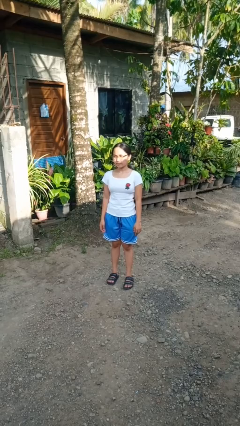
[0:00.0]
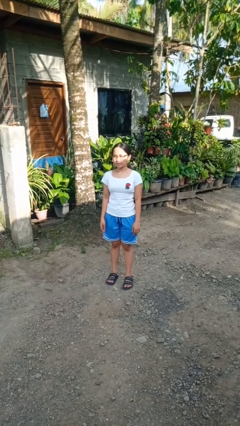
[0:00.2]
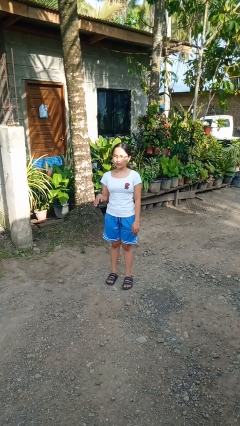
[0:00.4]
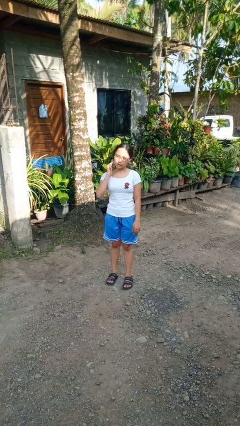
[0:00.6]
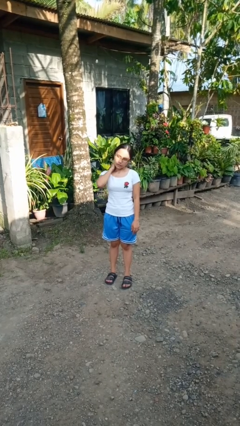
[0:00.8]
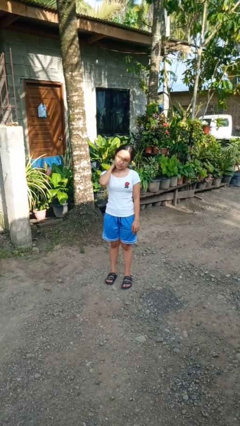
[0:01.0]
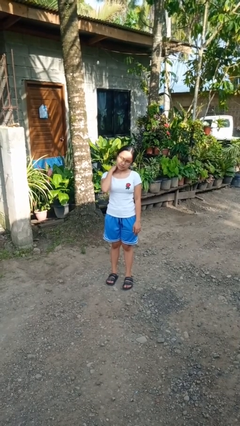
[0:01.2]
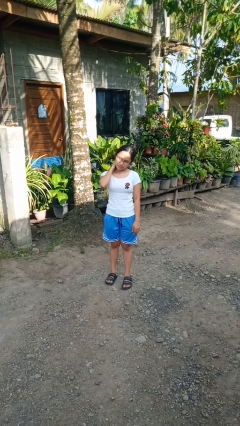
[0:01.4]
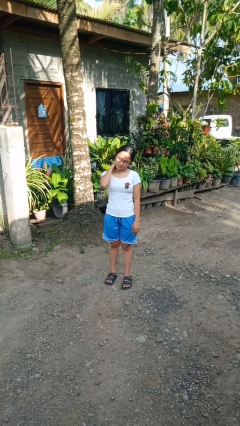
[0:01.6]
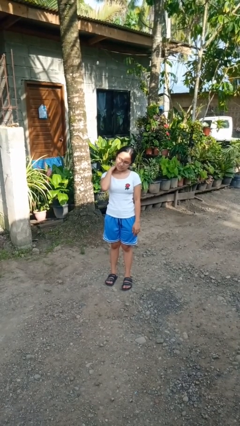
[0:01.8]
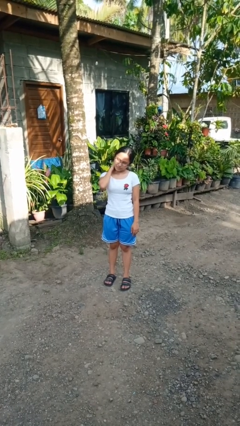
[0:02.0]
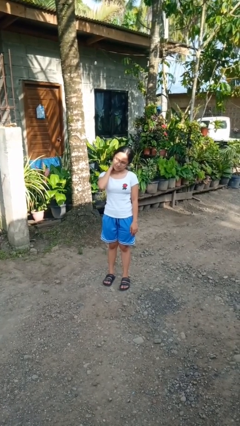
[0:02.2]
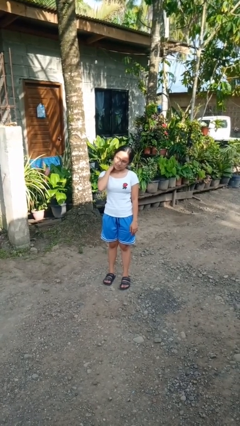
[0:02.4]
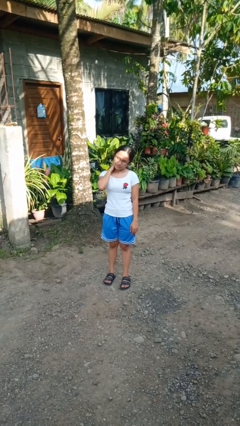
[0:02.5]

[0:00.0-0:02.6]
person rubs neck

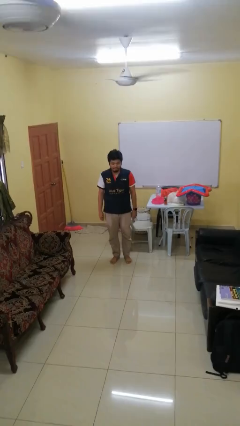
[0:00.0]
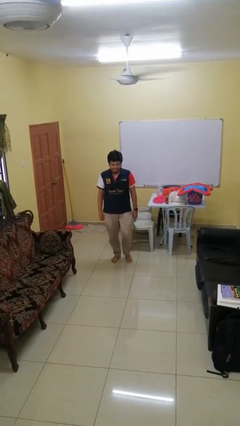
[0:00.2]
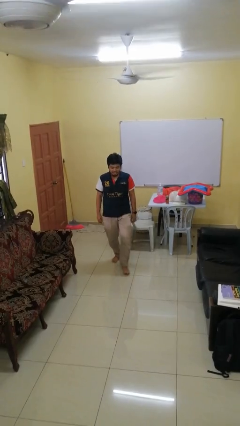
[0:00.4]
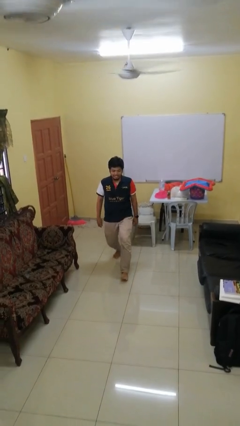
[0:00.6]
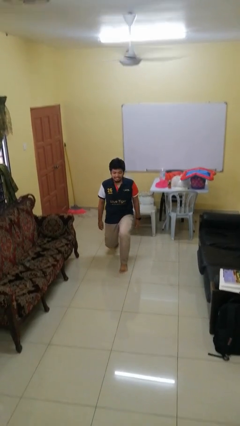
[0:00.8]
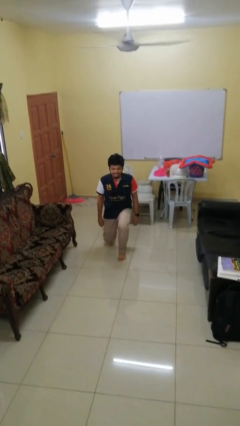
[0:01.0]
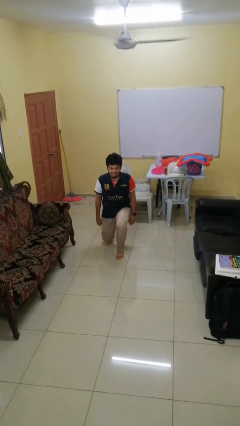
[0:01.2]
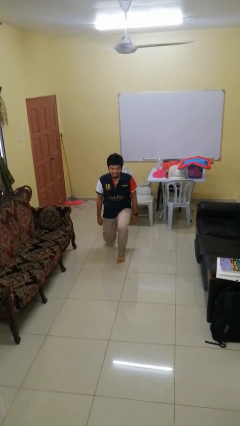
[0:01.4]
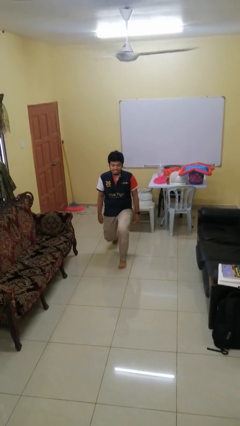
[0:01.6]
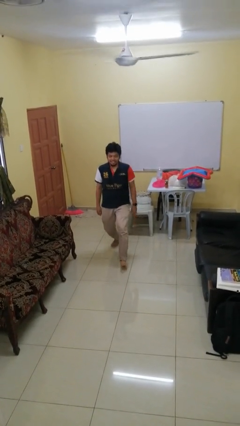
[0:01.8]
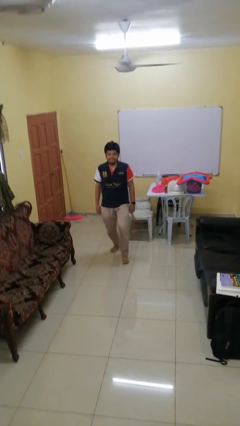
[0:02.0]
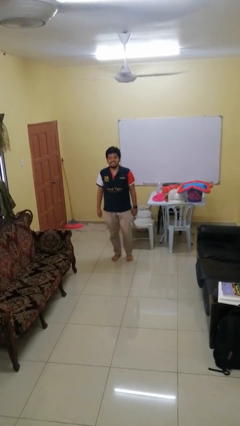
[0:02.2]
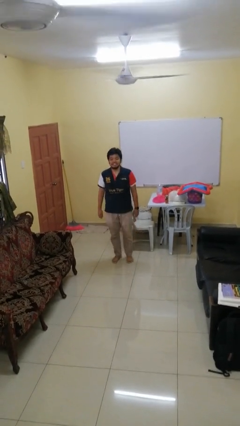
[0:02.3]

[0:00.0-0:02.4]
person exercises with lunges

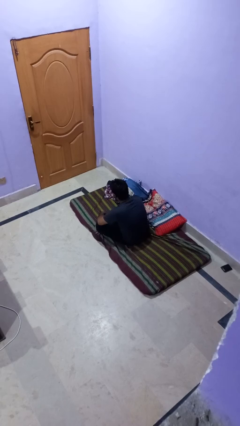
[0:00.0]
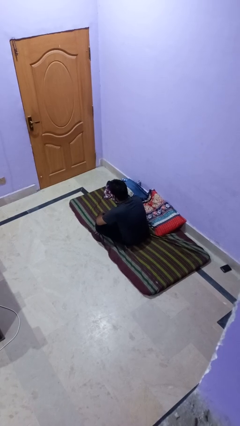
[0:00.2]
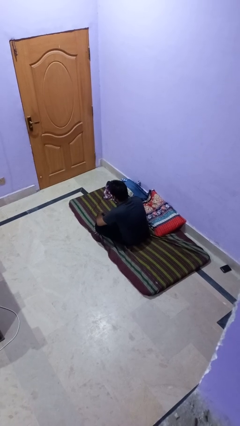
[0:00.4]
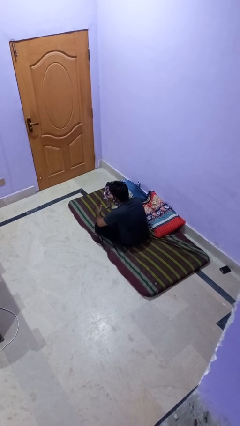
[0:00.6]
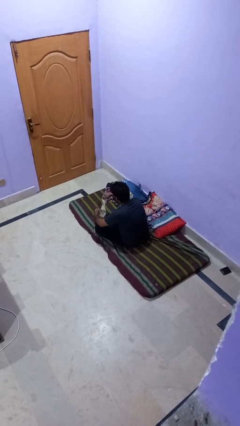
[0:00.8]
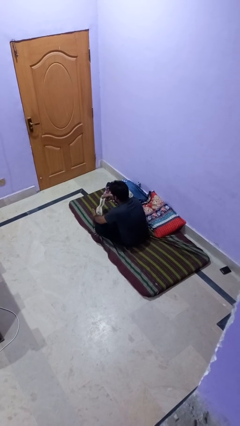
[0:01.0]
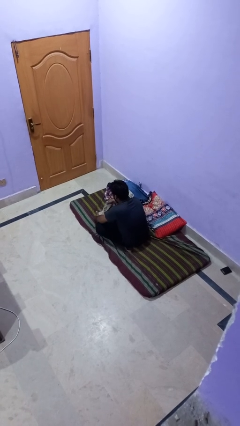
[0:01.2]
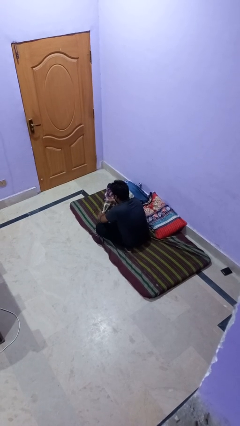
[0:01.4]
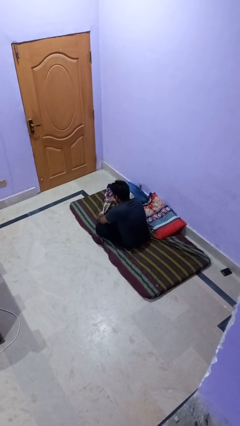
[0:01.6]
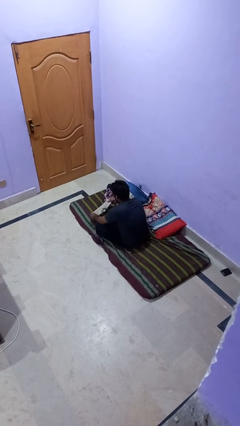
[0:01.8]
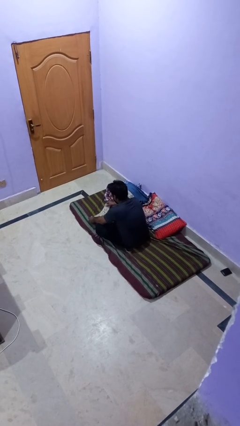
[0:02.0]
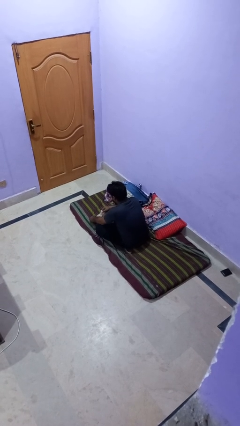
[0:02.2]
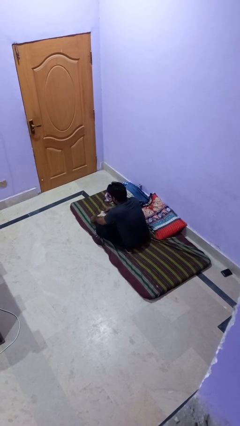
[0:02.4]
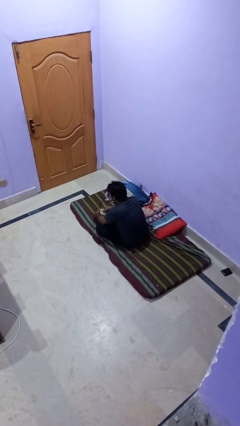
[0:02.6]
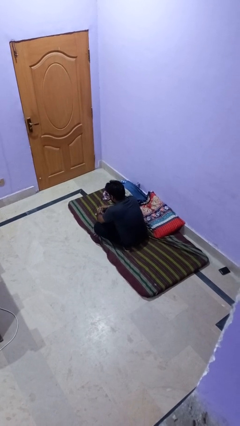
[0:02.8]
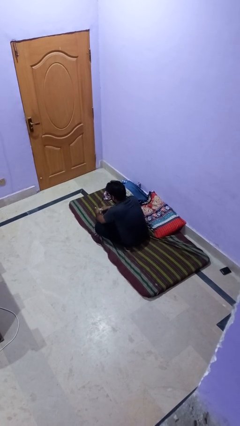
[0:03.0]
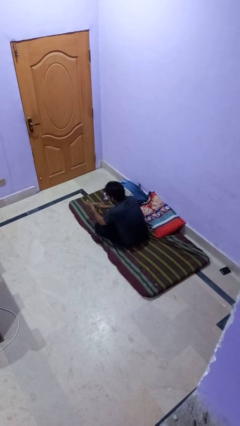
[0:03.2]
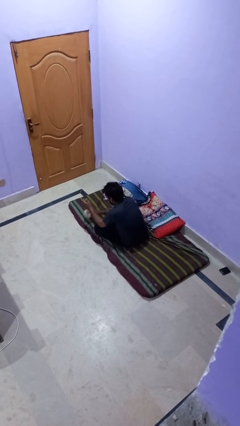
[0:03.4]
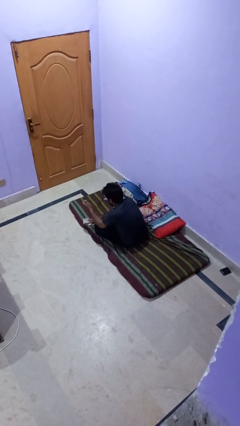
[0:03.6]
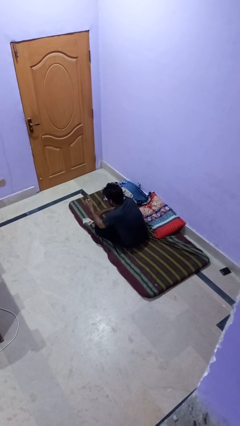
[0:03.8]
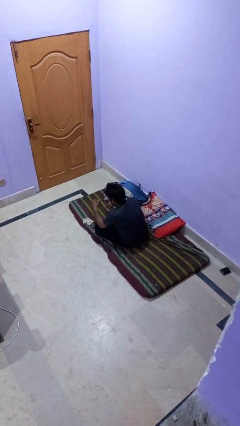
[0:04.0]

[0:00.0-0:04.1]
person folds socks

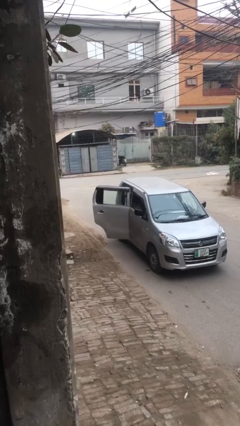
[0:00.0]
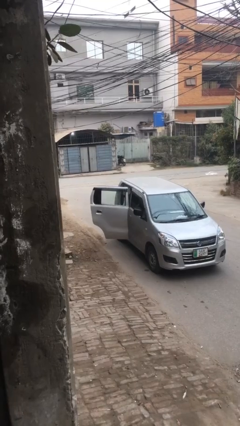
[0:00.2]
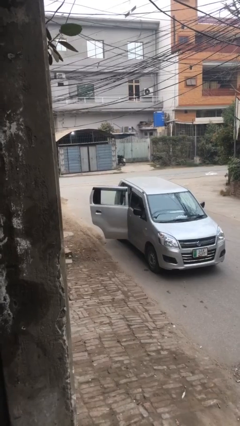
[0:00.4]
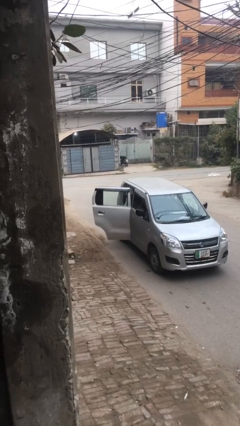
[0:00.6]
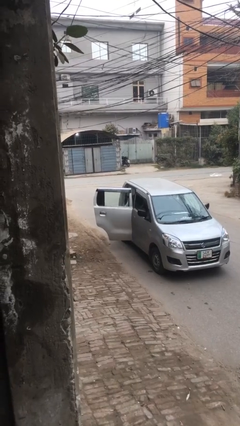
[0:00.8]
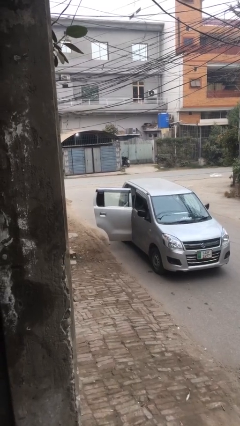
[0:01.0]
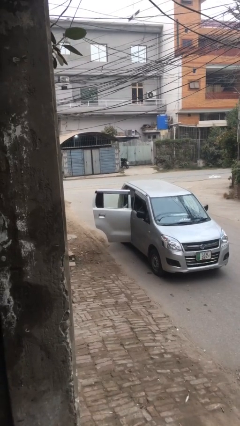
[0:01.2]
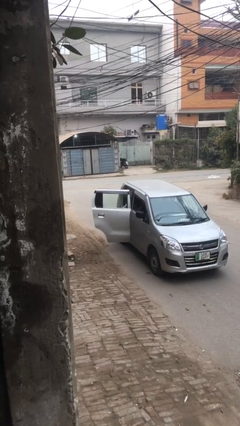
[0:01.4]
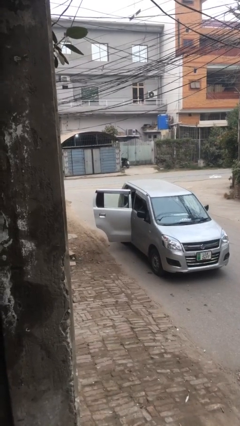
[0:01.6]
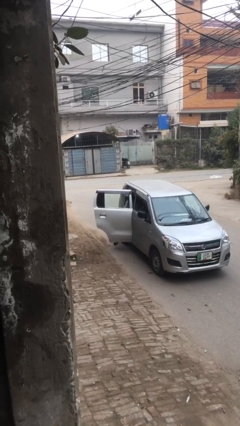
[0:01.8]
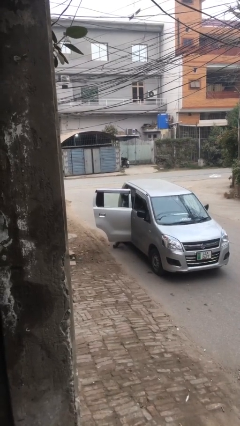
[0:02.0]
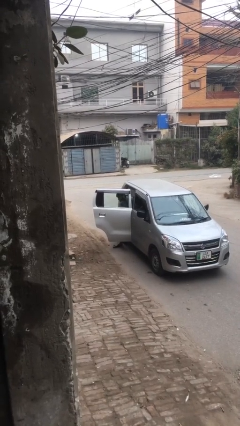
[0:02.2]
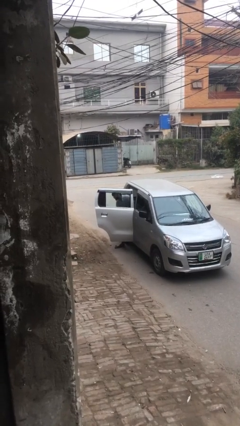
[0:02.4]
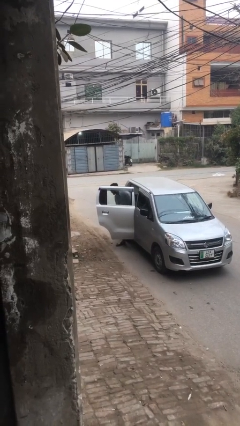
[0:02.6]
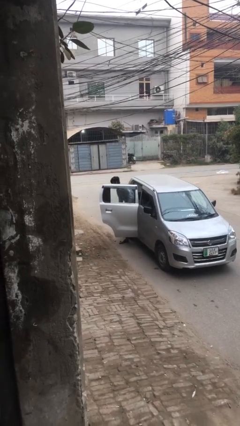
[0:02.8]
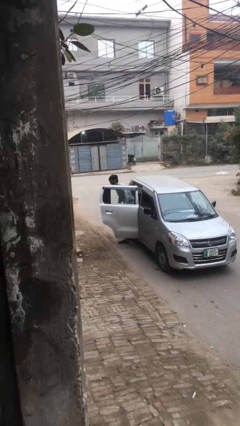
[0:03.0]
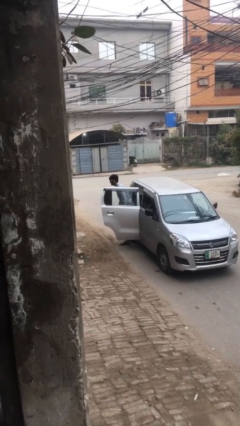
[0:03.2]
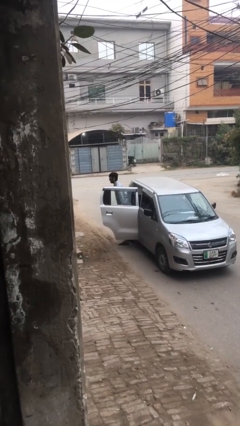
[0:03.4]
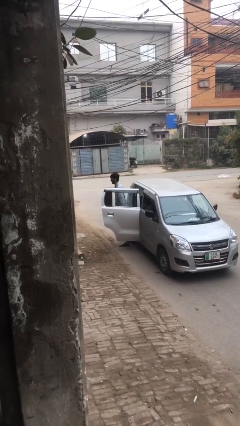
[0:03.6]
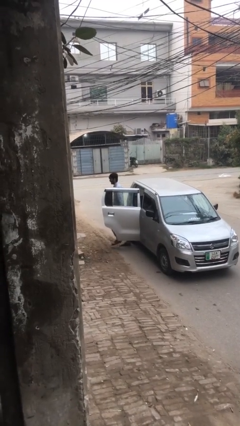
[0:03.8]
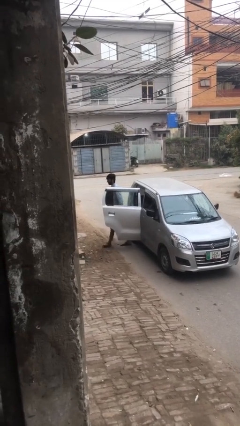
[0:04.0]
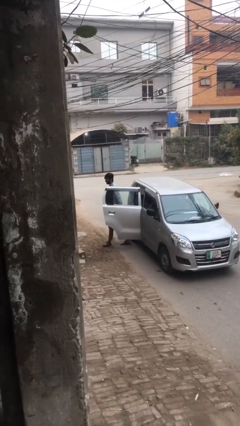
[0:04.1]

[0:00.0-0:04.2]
person exits car

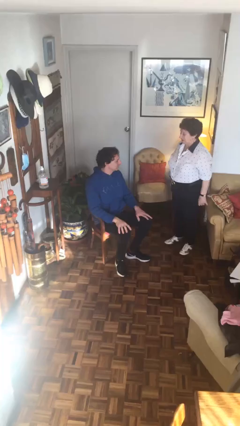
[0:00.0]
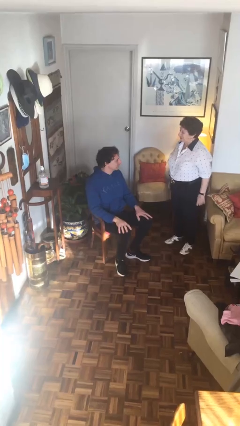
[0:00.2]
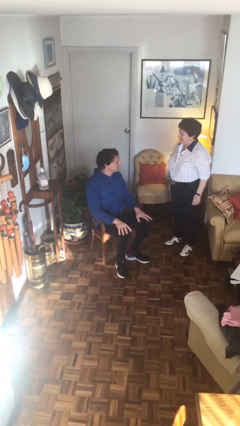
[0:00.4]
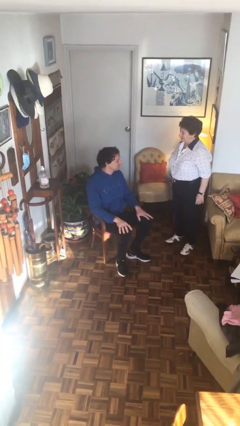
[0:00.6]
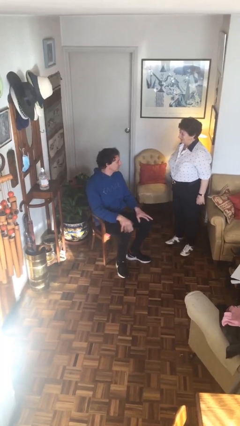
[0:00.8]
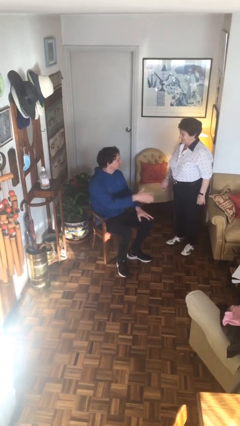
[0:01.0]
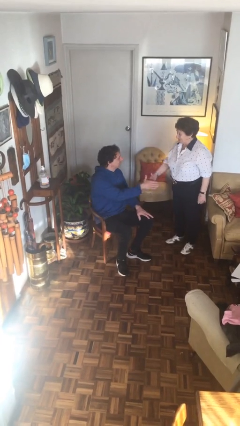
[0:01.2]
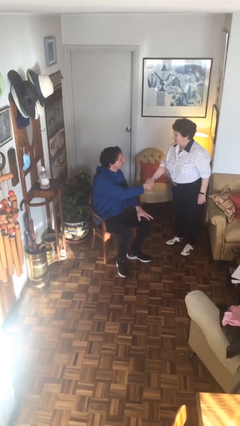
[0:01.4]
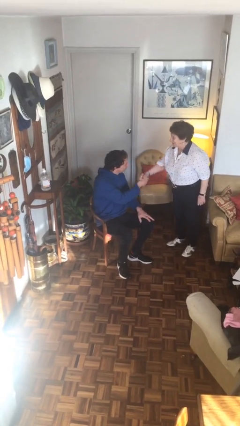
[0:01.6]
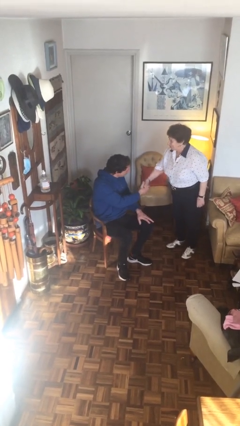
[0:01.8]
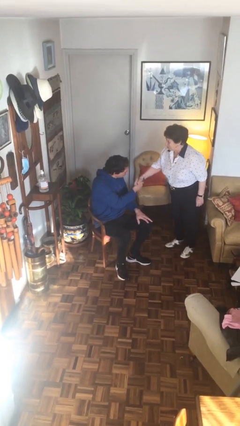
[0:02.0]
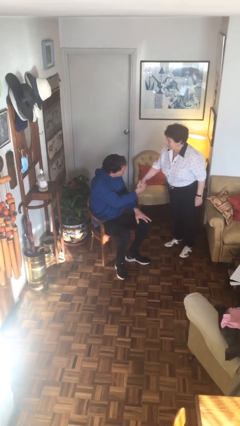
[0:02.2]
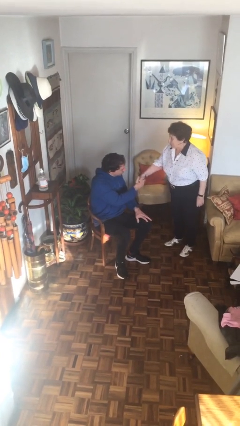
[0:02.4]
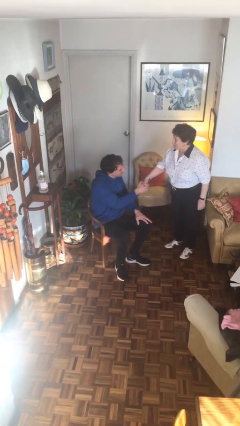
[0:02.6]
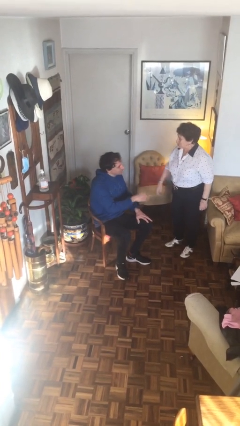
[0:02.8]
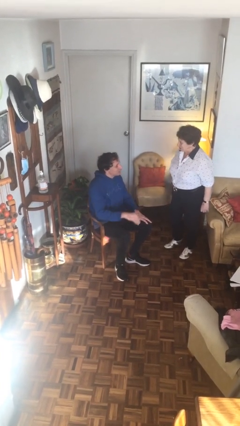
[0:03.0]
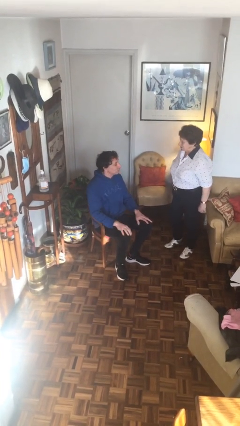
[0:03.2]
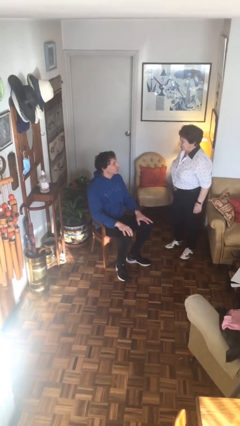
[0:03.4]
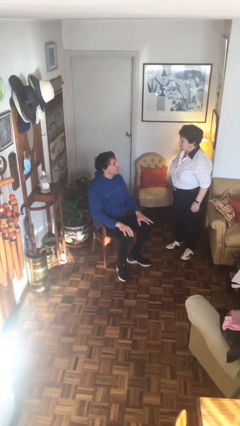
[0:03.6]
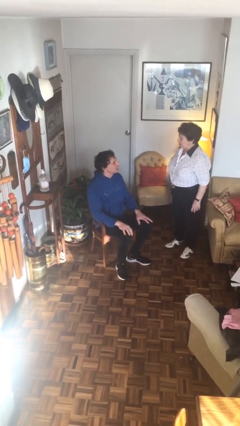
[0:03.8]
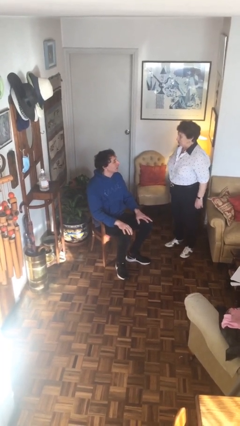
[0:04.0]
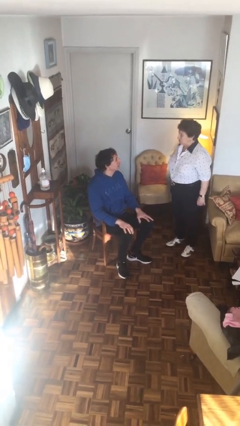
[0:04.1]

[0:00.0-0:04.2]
person shakes hand

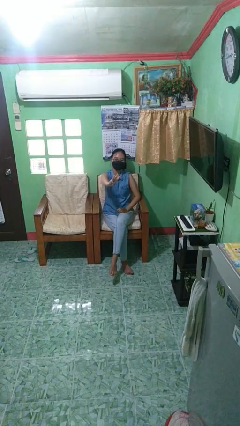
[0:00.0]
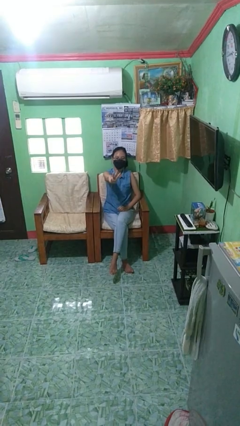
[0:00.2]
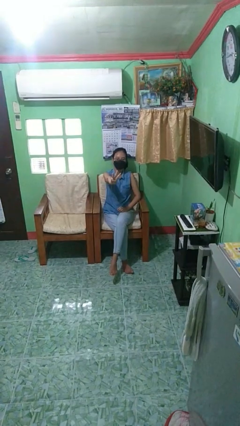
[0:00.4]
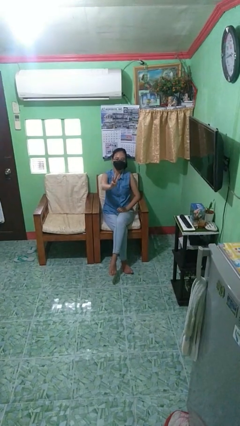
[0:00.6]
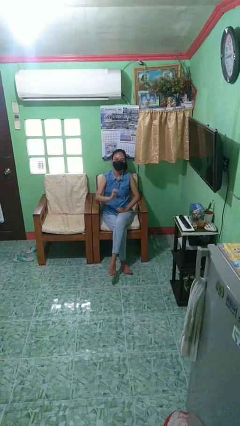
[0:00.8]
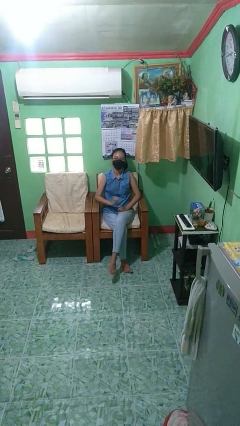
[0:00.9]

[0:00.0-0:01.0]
person gestures number three
